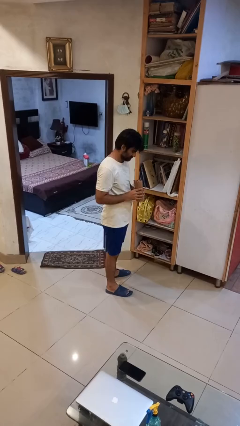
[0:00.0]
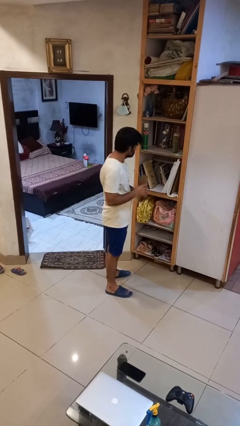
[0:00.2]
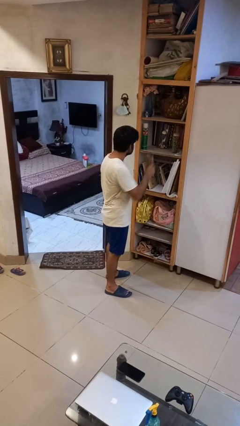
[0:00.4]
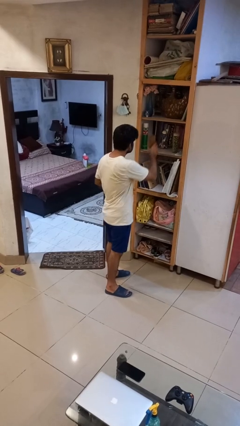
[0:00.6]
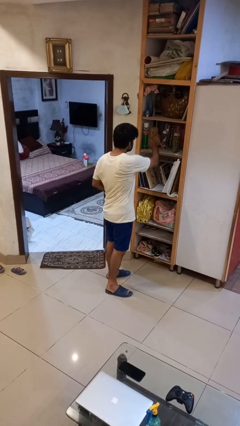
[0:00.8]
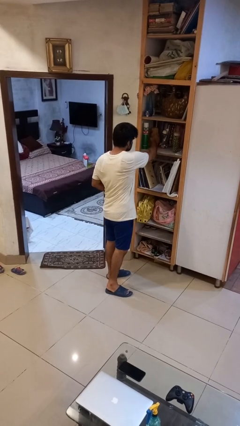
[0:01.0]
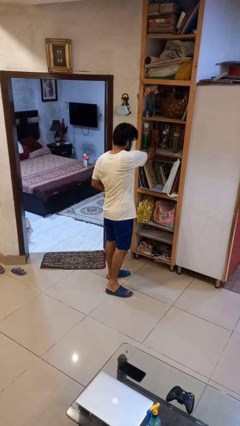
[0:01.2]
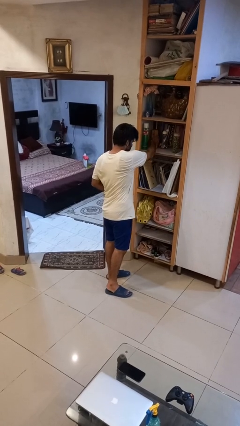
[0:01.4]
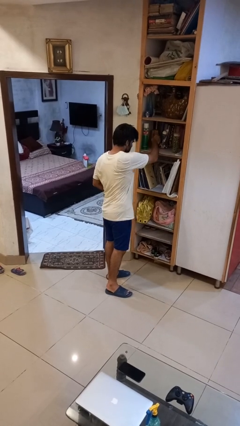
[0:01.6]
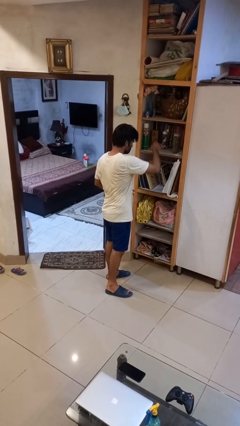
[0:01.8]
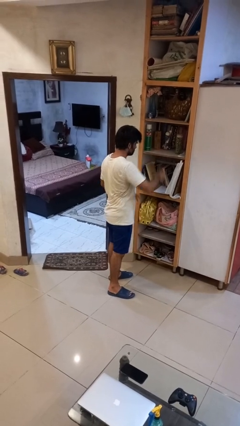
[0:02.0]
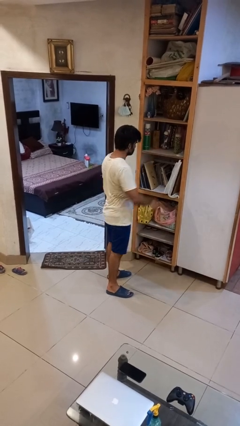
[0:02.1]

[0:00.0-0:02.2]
person puts down object into cabinet

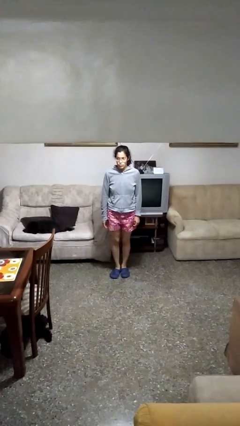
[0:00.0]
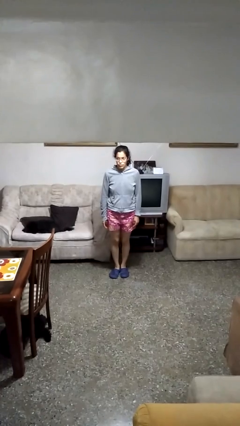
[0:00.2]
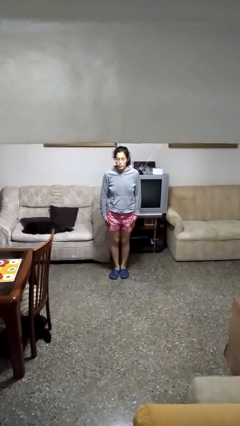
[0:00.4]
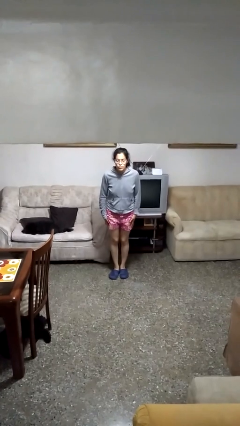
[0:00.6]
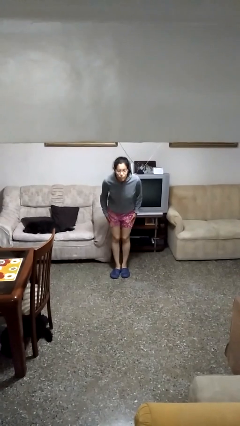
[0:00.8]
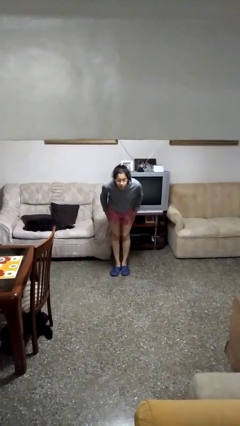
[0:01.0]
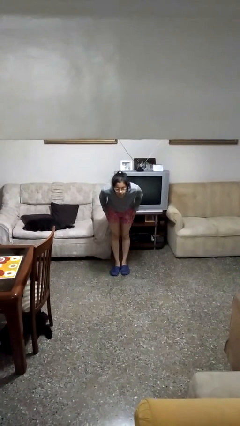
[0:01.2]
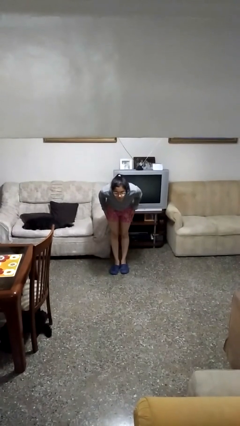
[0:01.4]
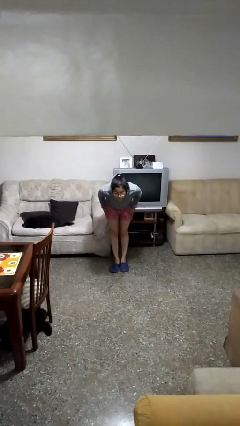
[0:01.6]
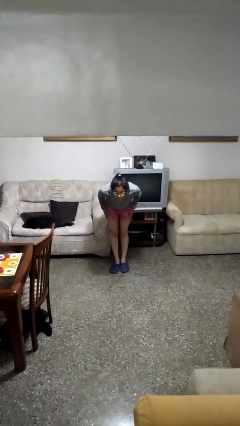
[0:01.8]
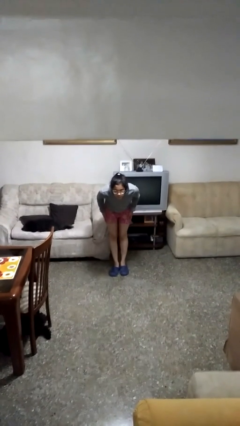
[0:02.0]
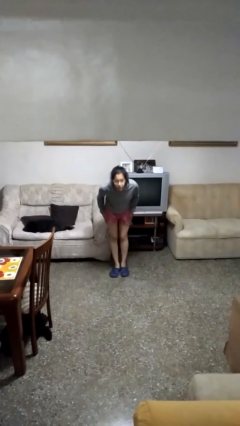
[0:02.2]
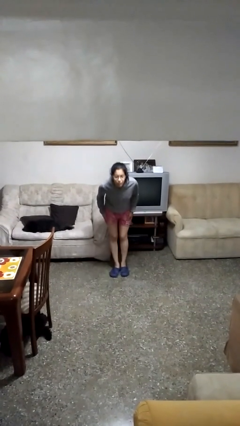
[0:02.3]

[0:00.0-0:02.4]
person bows

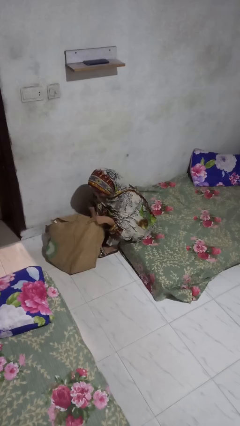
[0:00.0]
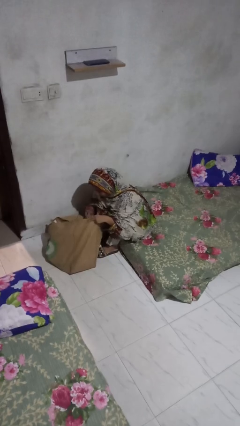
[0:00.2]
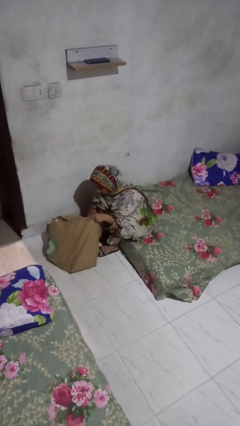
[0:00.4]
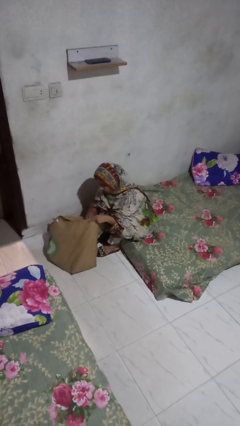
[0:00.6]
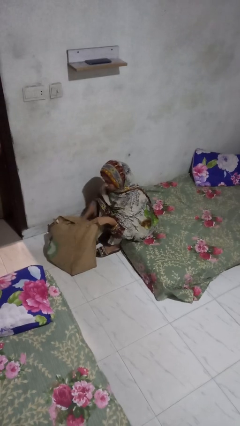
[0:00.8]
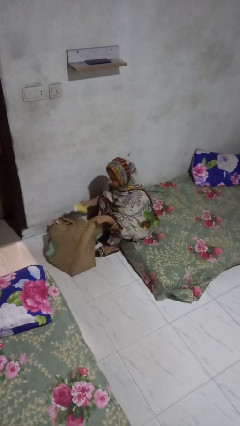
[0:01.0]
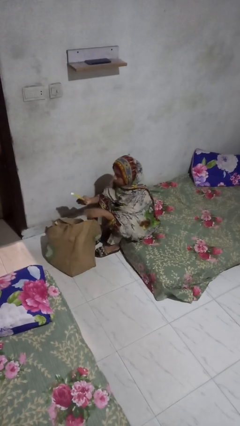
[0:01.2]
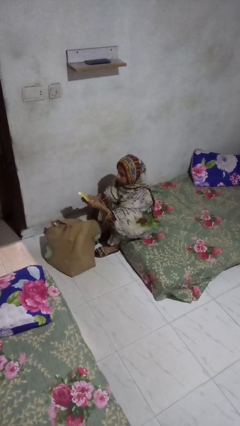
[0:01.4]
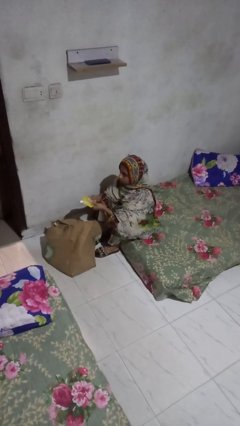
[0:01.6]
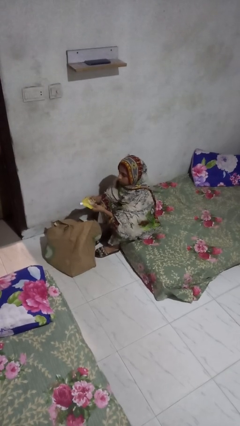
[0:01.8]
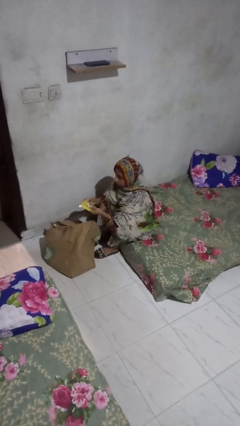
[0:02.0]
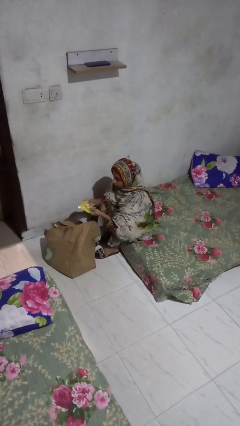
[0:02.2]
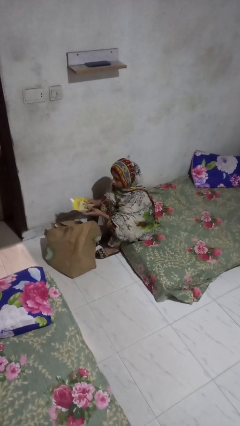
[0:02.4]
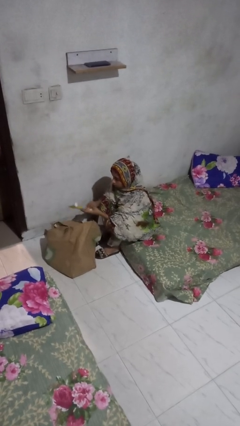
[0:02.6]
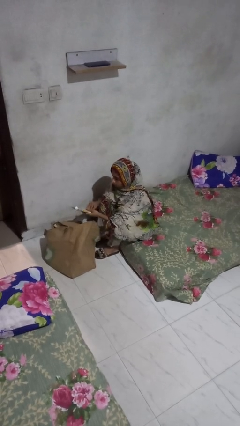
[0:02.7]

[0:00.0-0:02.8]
person takes object from bag

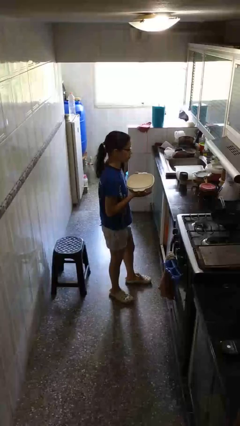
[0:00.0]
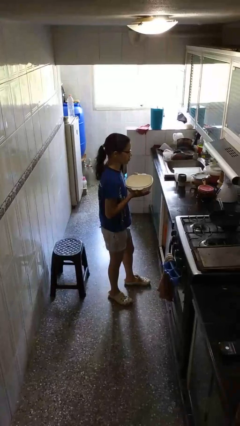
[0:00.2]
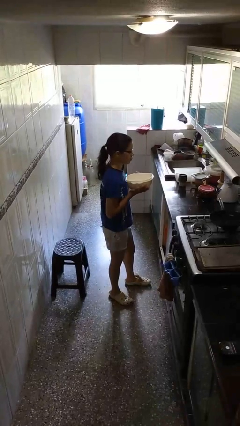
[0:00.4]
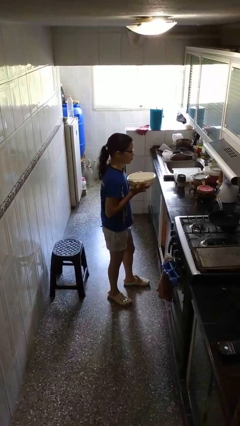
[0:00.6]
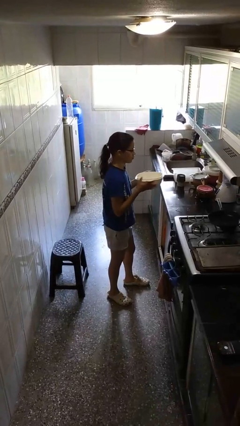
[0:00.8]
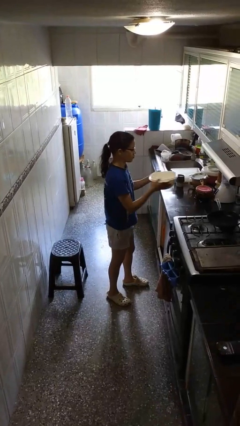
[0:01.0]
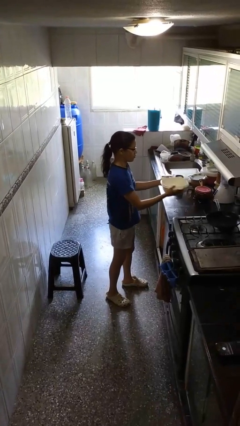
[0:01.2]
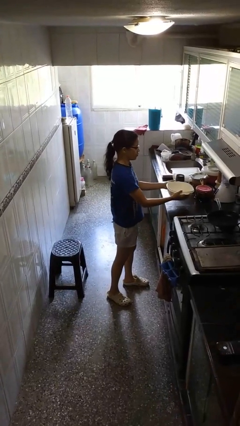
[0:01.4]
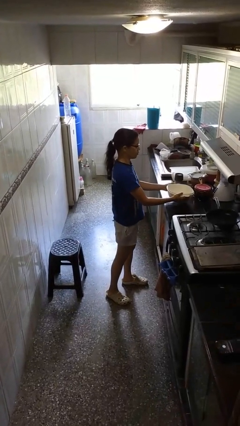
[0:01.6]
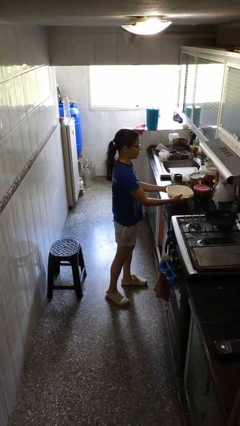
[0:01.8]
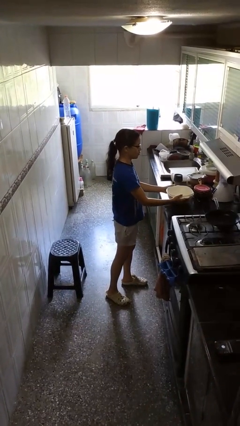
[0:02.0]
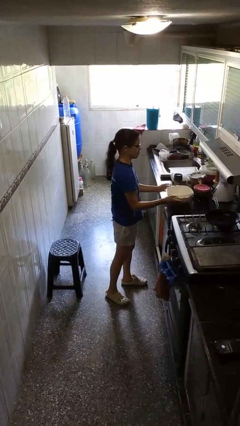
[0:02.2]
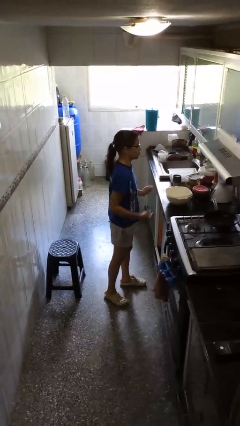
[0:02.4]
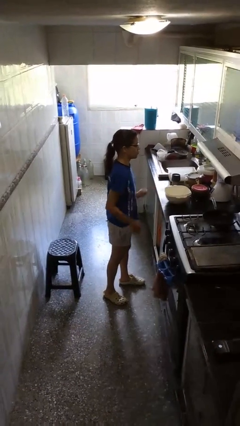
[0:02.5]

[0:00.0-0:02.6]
person puts down object on countertop

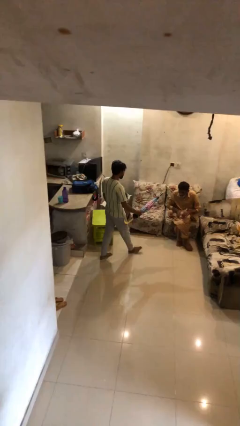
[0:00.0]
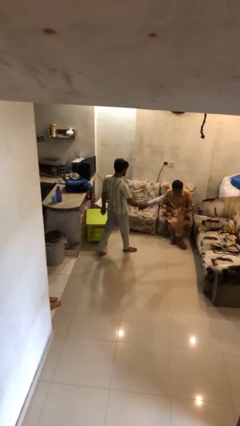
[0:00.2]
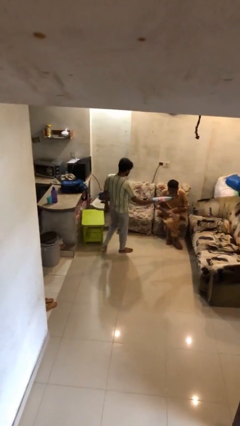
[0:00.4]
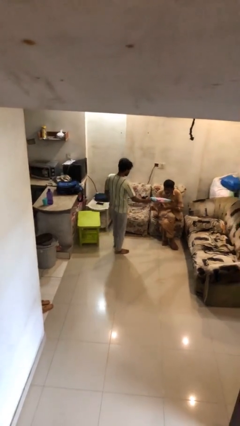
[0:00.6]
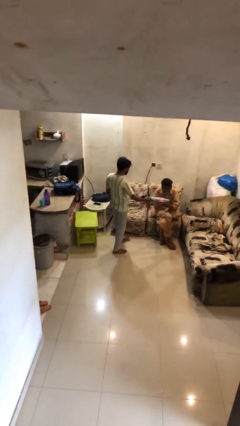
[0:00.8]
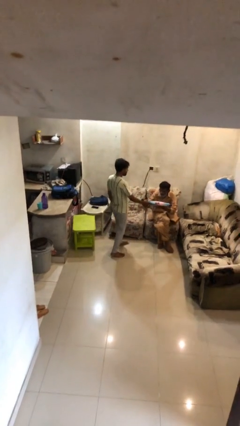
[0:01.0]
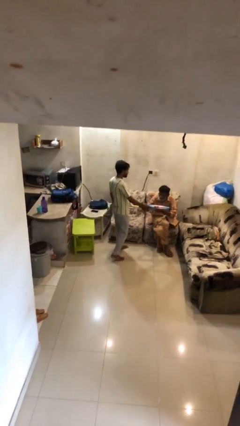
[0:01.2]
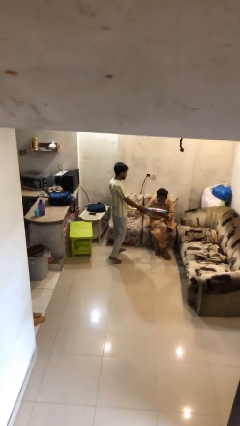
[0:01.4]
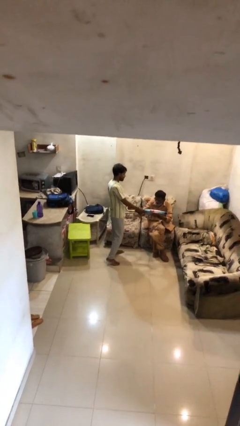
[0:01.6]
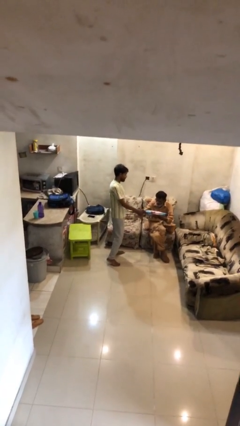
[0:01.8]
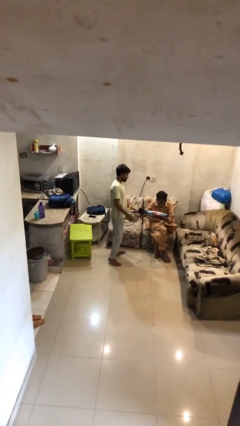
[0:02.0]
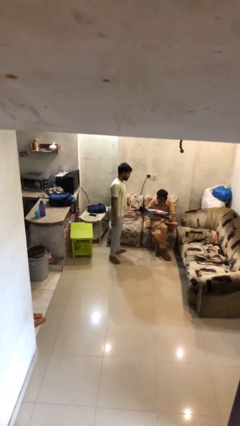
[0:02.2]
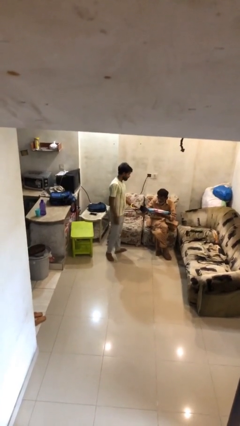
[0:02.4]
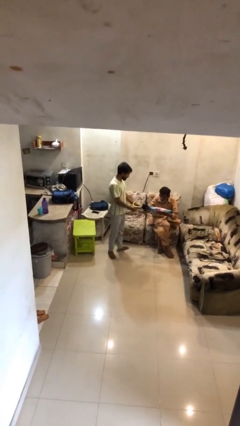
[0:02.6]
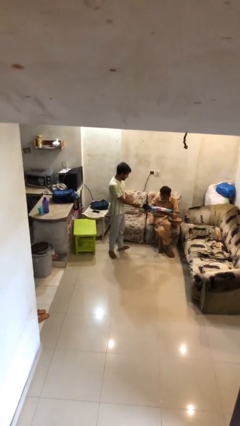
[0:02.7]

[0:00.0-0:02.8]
person transfers object to person

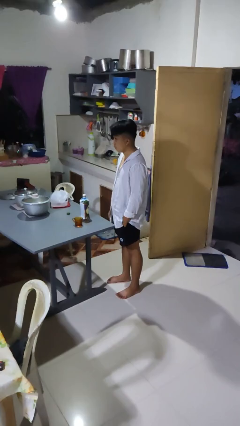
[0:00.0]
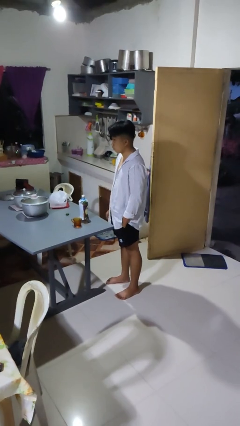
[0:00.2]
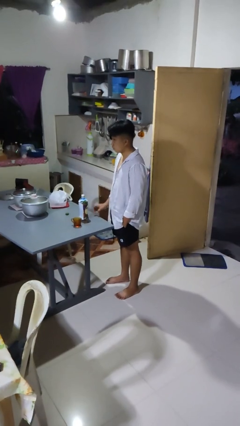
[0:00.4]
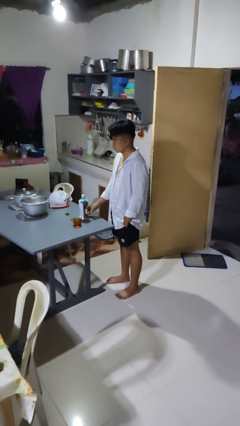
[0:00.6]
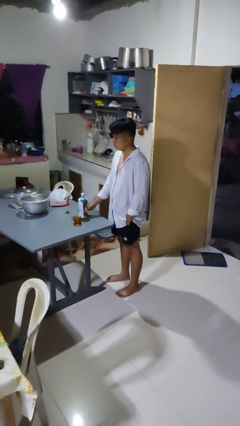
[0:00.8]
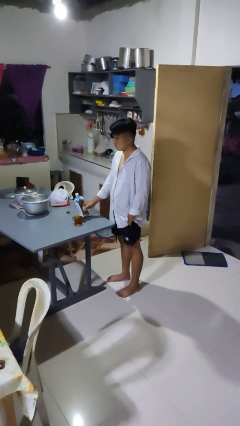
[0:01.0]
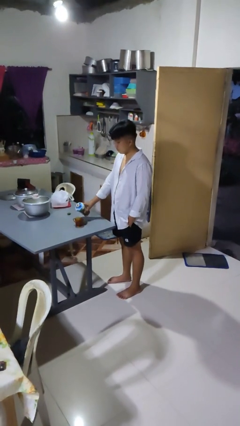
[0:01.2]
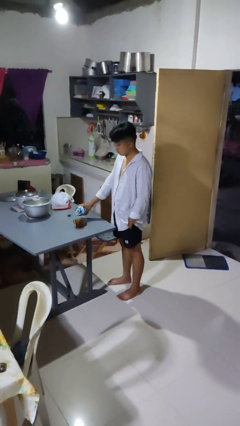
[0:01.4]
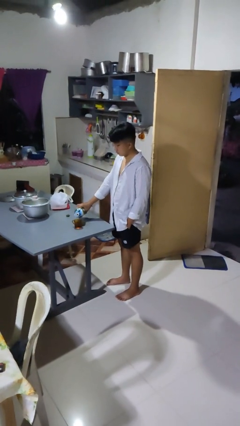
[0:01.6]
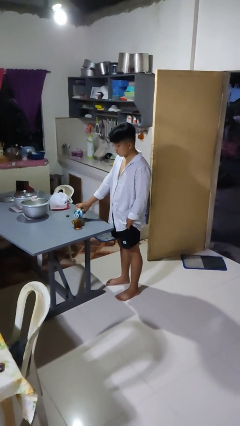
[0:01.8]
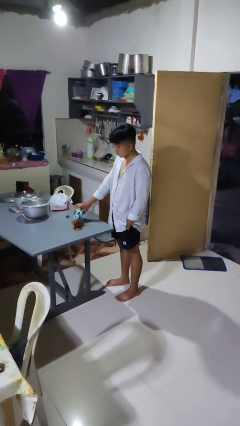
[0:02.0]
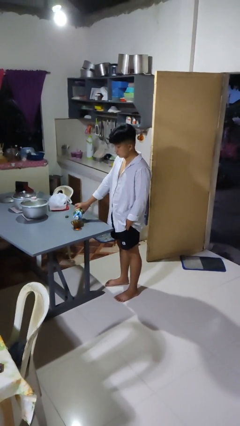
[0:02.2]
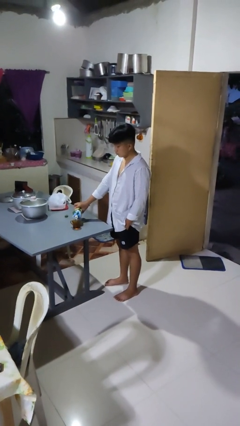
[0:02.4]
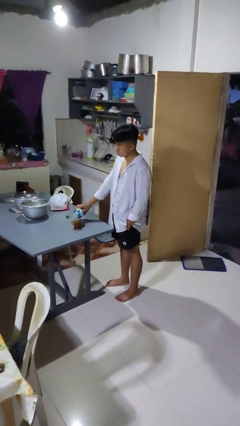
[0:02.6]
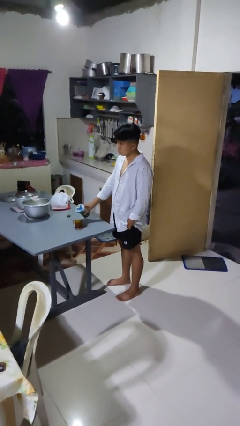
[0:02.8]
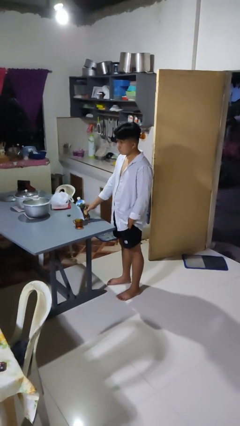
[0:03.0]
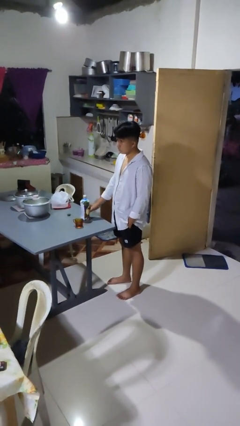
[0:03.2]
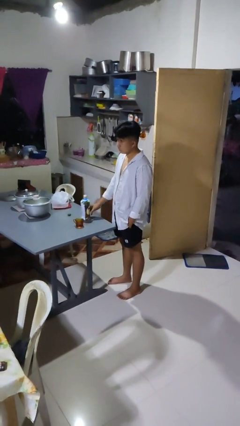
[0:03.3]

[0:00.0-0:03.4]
person pours liquid into cup

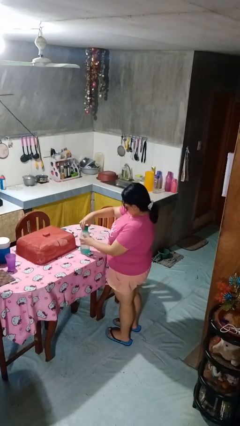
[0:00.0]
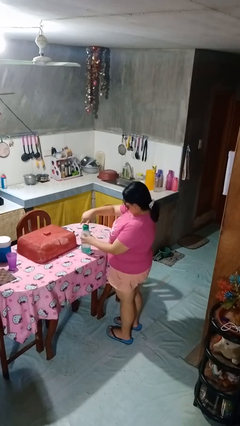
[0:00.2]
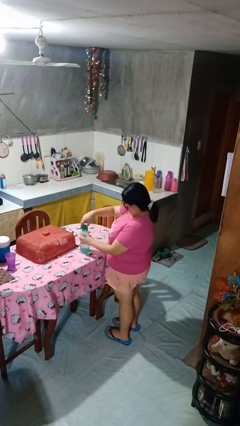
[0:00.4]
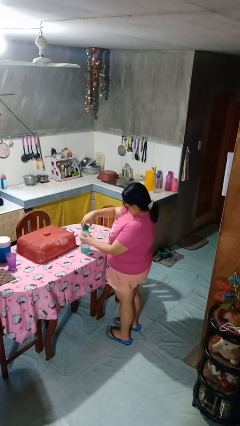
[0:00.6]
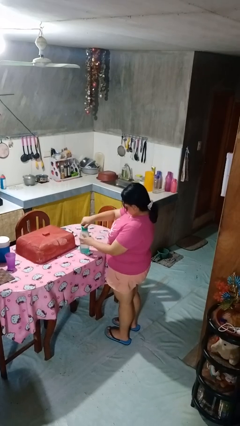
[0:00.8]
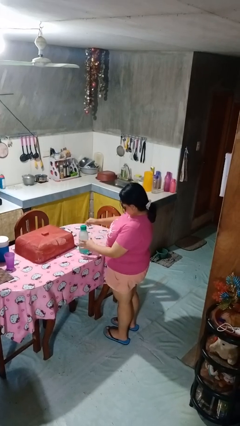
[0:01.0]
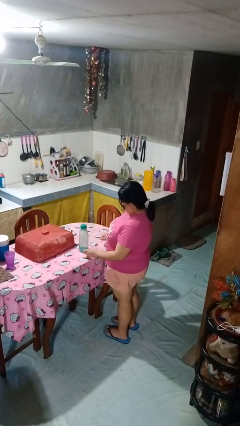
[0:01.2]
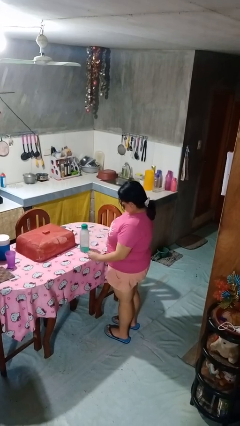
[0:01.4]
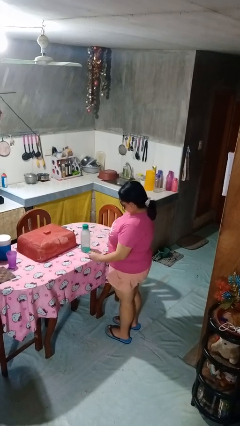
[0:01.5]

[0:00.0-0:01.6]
person screws lid to bottle
